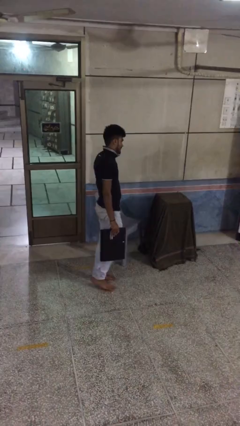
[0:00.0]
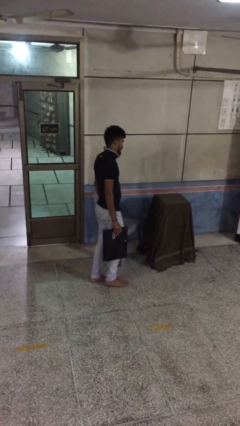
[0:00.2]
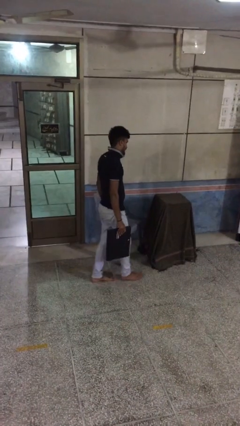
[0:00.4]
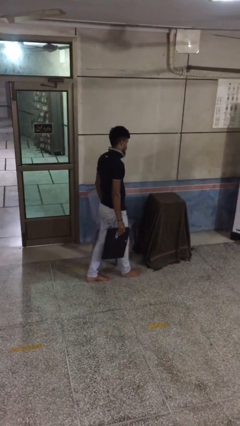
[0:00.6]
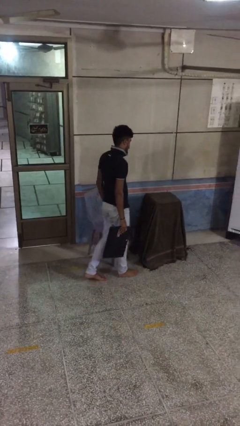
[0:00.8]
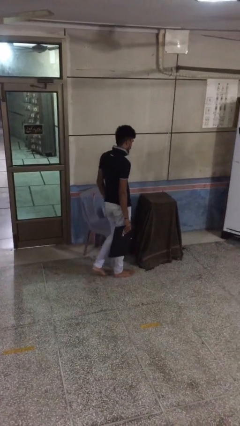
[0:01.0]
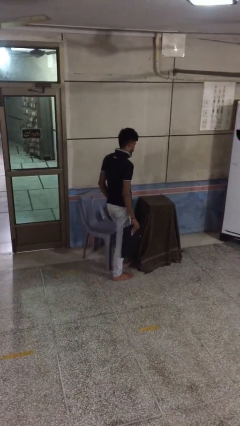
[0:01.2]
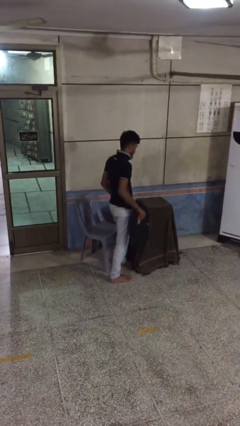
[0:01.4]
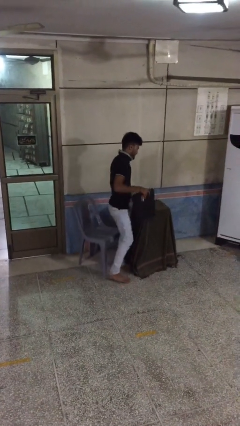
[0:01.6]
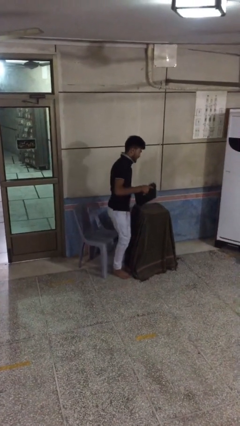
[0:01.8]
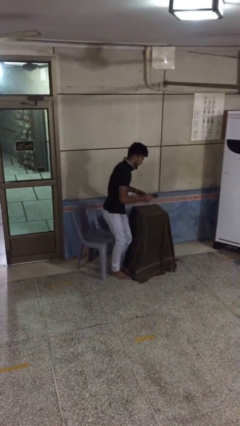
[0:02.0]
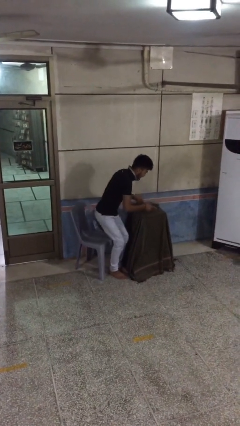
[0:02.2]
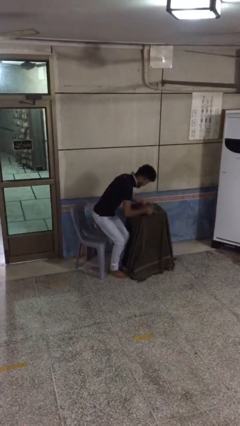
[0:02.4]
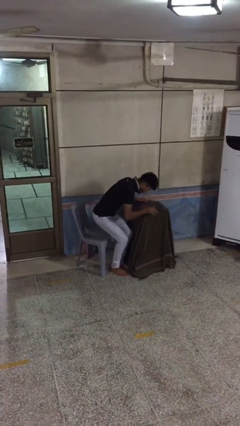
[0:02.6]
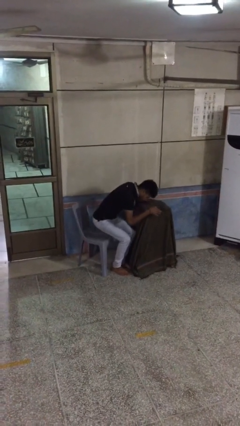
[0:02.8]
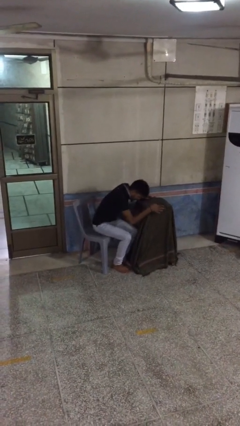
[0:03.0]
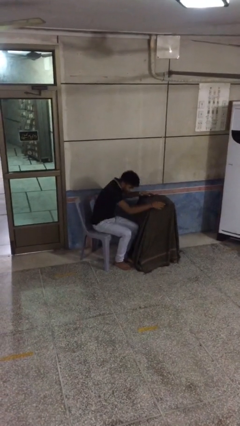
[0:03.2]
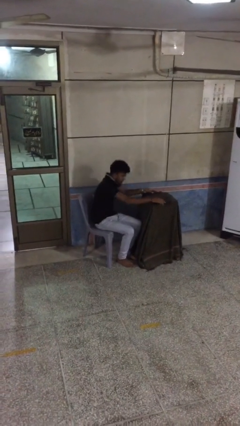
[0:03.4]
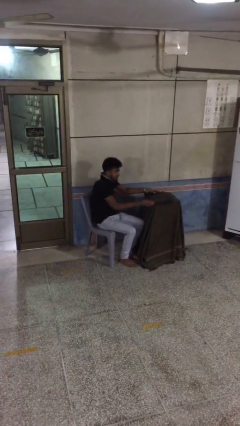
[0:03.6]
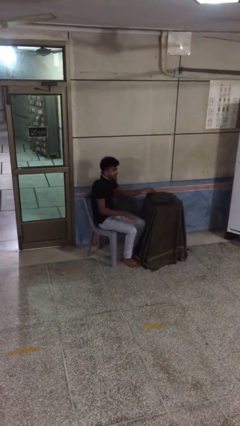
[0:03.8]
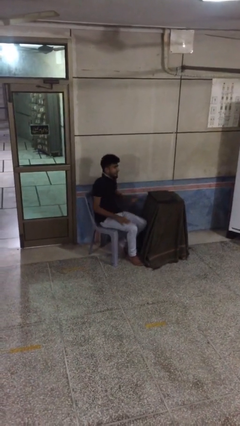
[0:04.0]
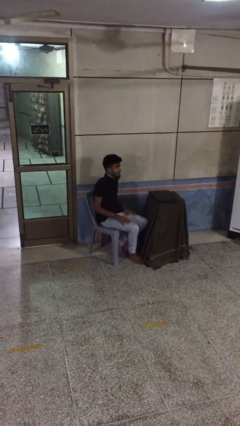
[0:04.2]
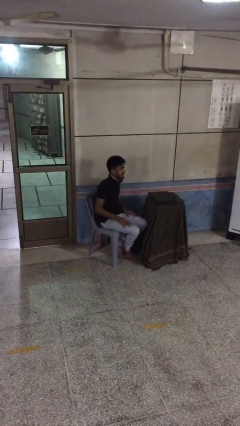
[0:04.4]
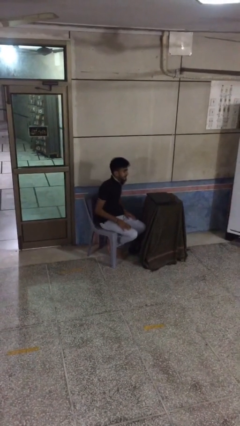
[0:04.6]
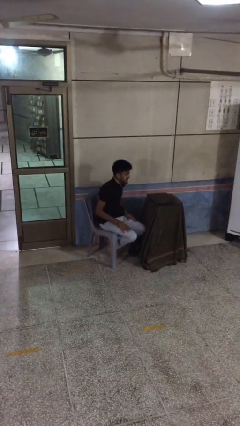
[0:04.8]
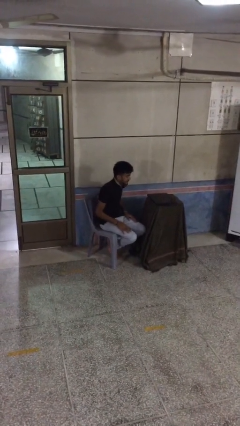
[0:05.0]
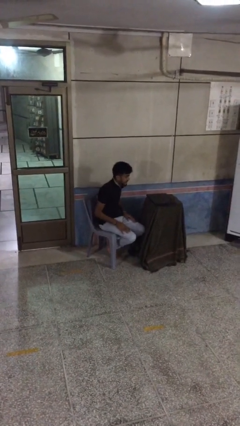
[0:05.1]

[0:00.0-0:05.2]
person sits down

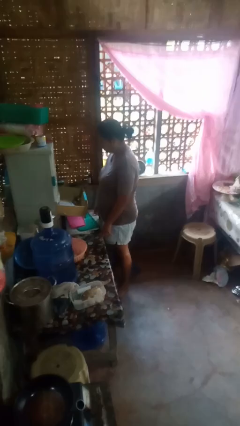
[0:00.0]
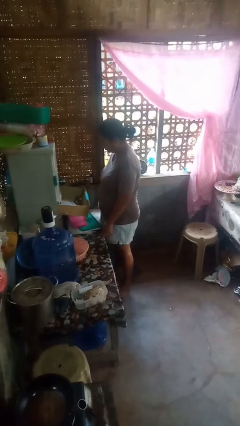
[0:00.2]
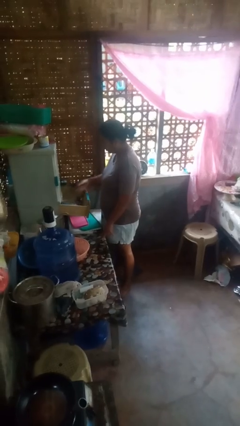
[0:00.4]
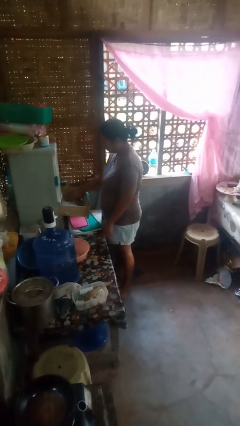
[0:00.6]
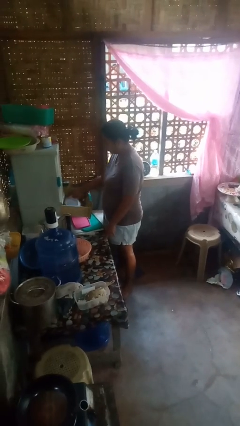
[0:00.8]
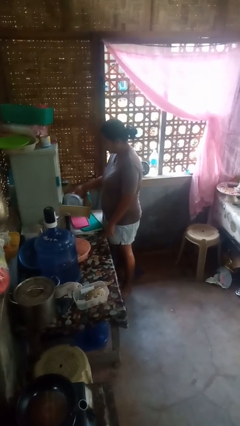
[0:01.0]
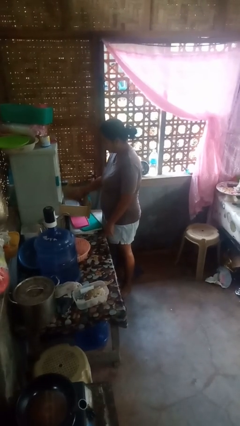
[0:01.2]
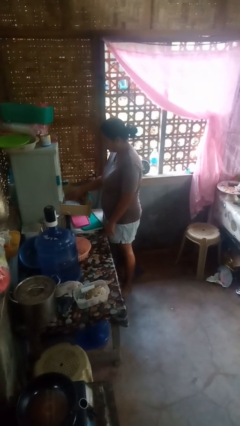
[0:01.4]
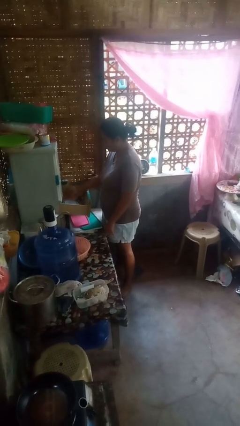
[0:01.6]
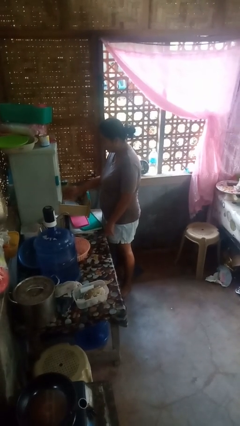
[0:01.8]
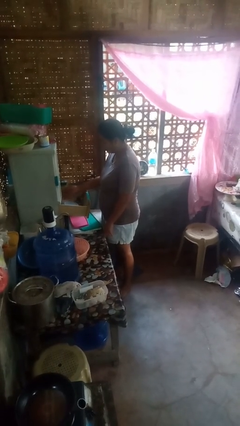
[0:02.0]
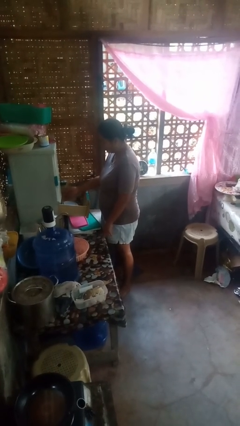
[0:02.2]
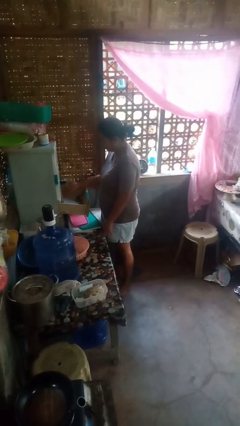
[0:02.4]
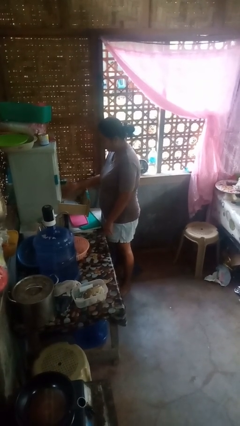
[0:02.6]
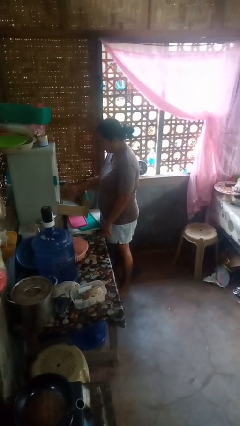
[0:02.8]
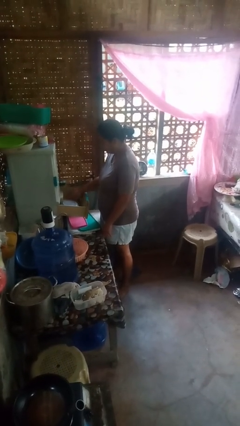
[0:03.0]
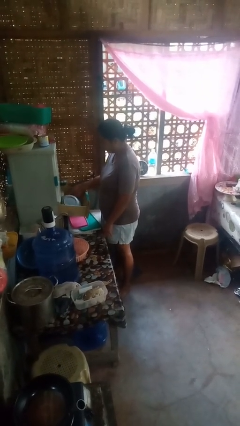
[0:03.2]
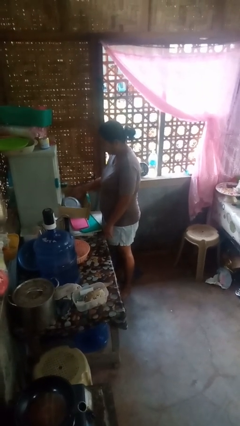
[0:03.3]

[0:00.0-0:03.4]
person searches in kitchen drawer

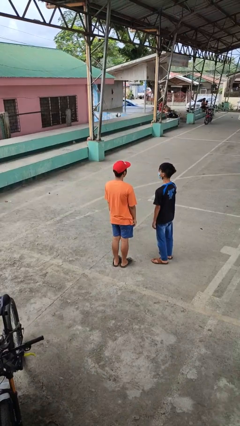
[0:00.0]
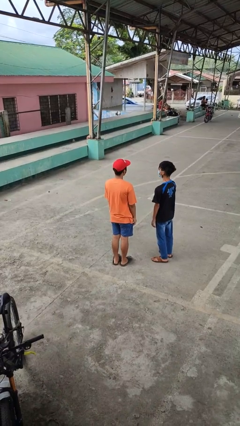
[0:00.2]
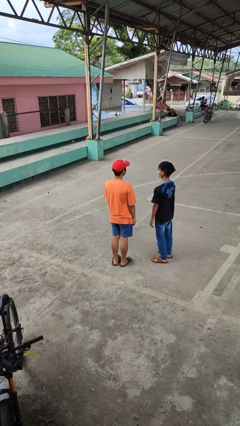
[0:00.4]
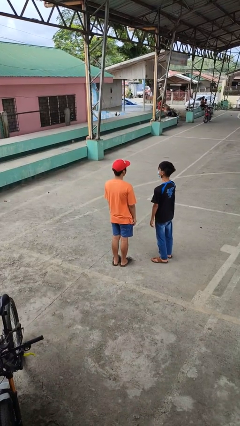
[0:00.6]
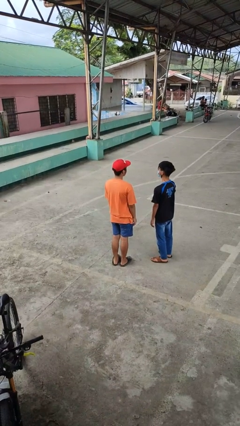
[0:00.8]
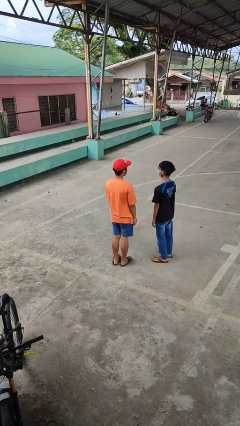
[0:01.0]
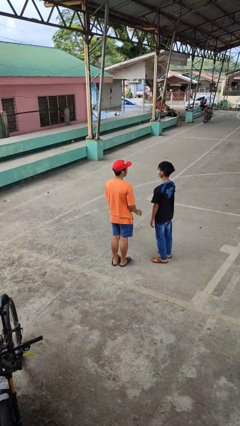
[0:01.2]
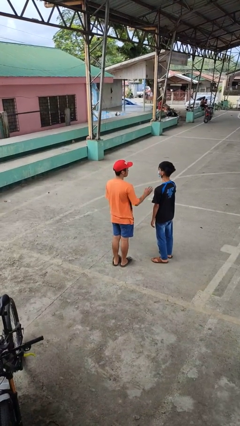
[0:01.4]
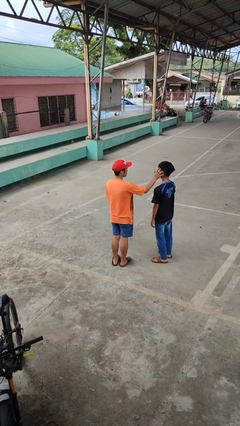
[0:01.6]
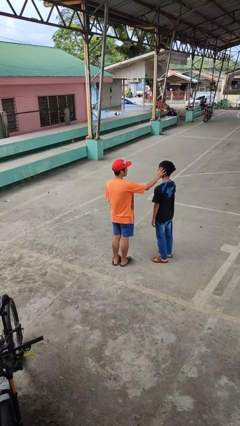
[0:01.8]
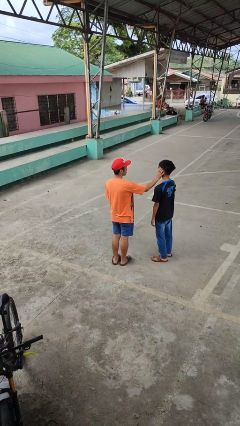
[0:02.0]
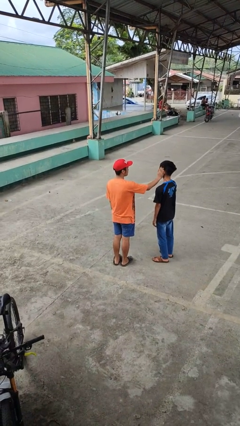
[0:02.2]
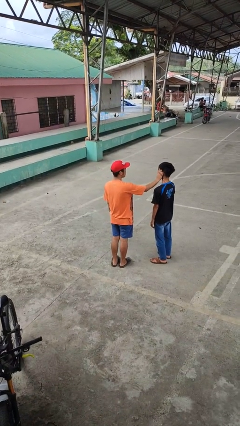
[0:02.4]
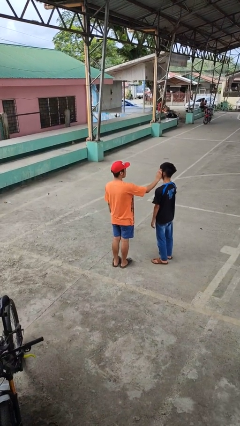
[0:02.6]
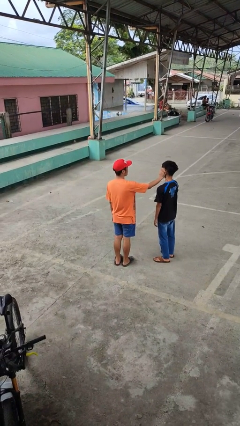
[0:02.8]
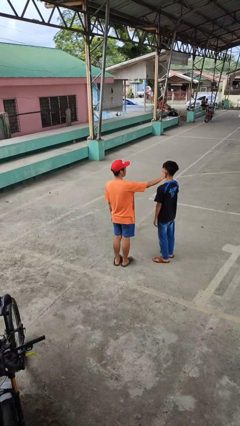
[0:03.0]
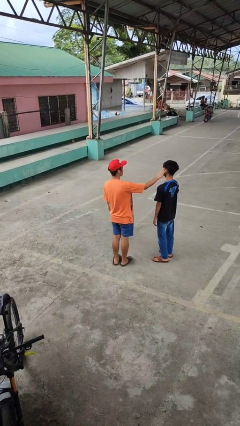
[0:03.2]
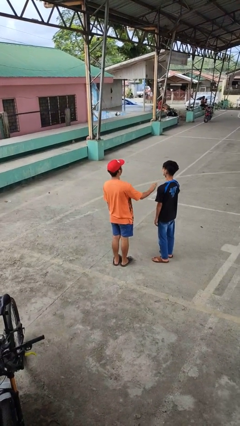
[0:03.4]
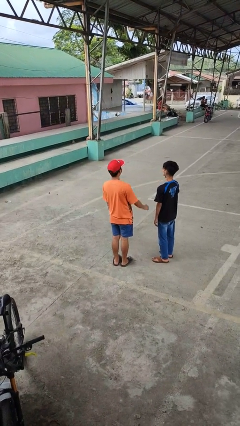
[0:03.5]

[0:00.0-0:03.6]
person touches face of person

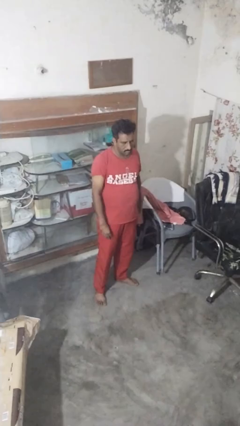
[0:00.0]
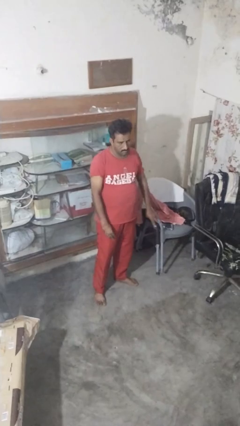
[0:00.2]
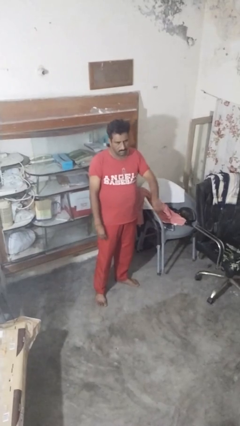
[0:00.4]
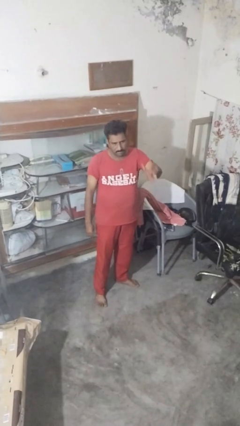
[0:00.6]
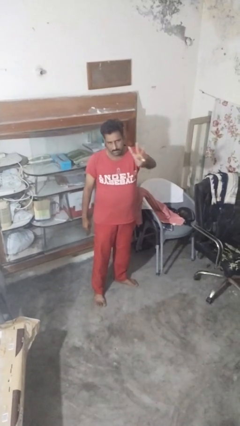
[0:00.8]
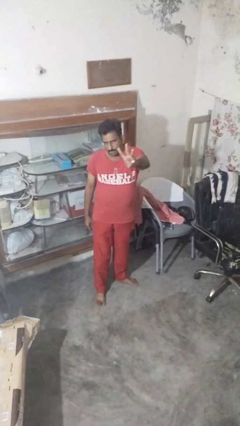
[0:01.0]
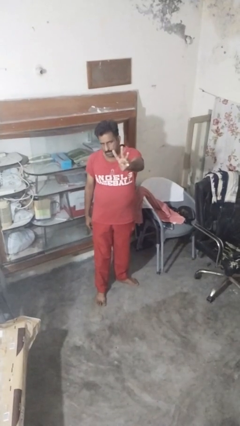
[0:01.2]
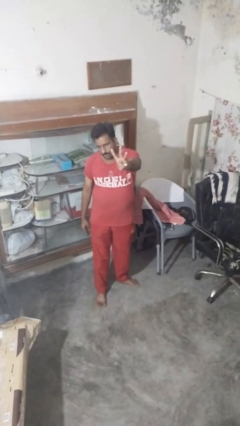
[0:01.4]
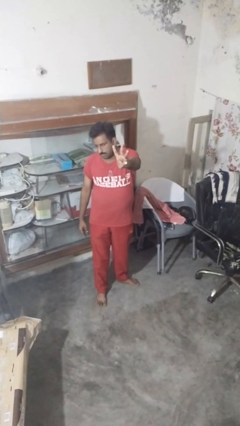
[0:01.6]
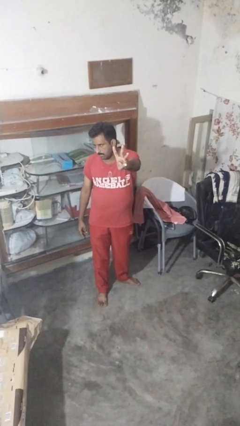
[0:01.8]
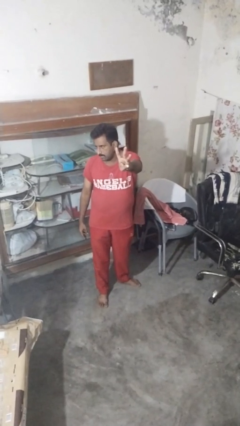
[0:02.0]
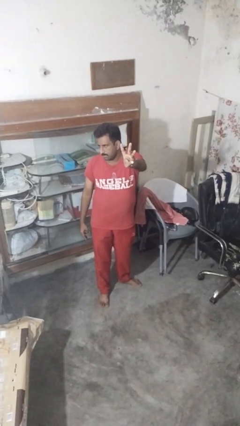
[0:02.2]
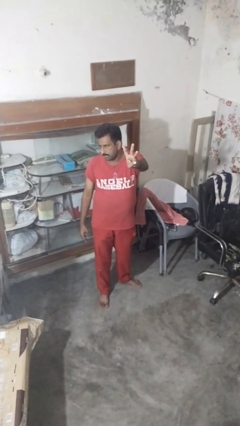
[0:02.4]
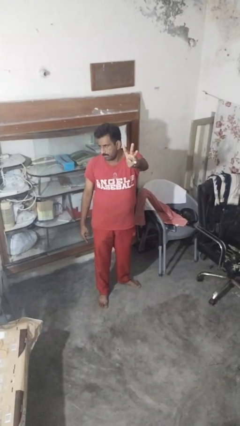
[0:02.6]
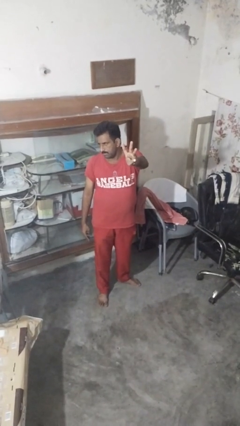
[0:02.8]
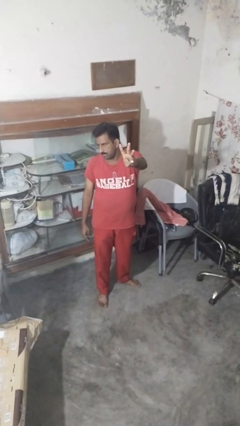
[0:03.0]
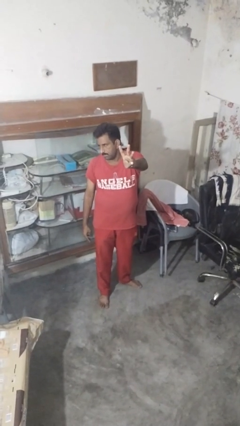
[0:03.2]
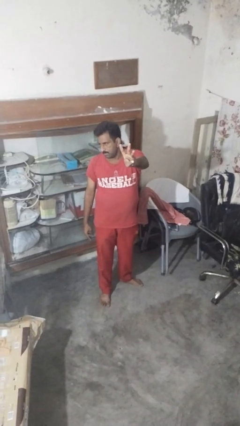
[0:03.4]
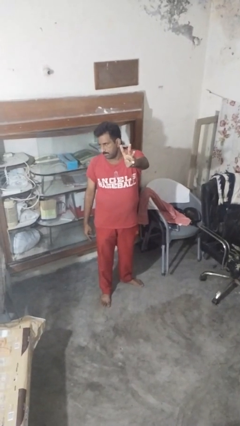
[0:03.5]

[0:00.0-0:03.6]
person gestures number three

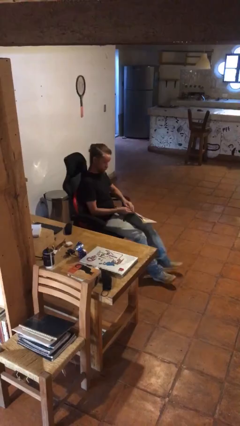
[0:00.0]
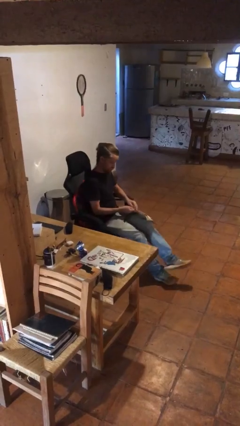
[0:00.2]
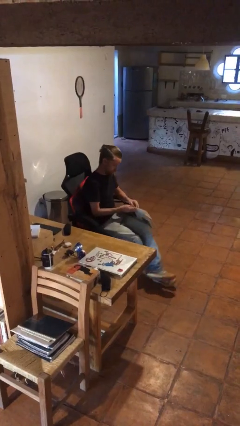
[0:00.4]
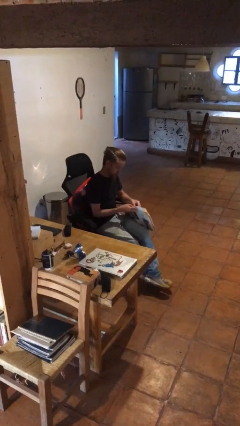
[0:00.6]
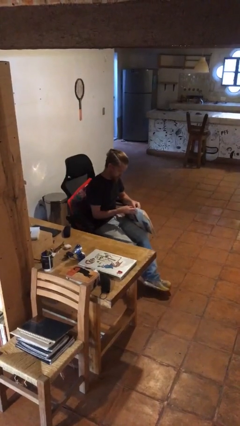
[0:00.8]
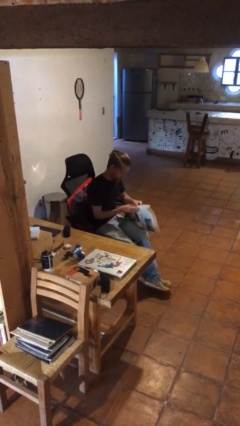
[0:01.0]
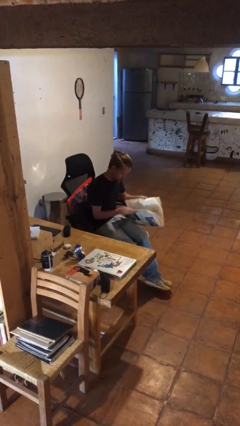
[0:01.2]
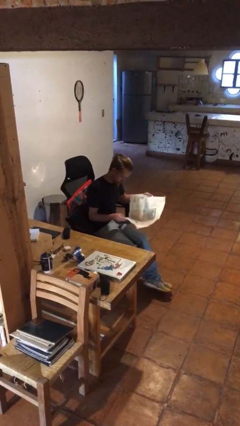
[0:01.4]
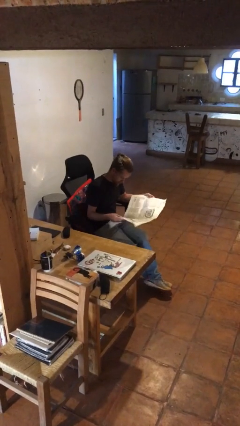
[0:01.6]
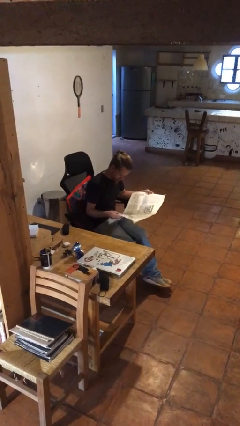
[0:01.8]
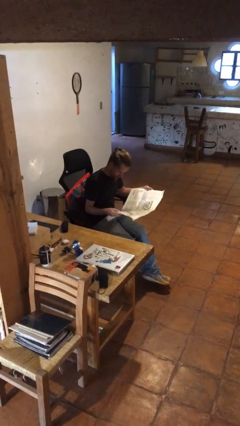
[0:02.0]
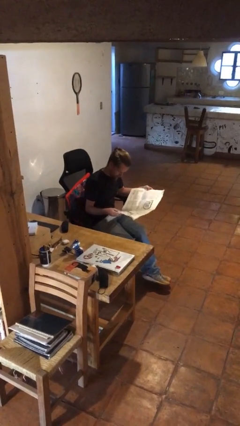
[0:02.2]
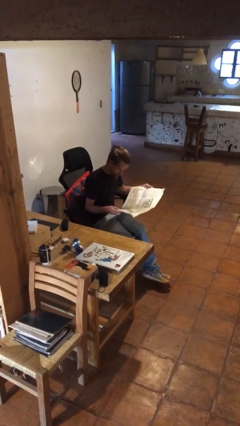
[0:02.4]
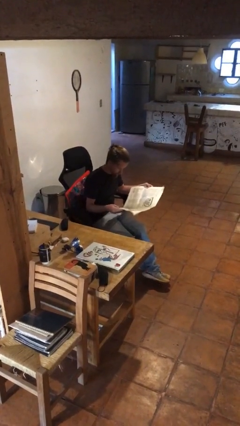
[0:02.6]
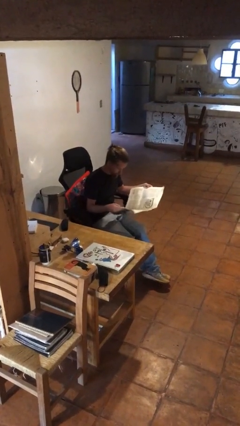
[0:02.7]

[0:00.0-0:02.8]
person reads newspaper
